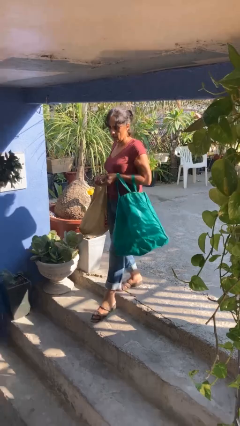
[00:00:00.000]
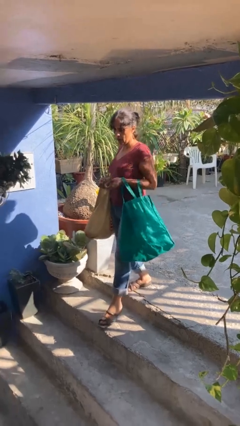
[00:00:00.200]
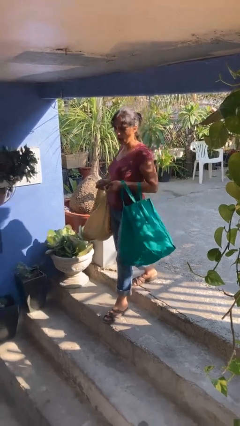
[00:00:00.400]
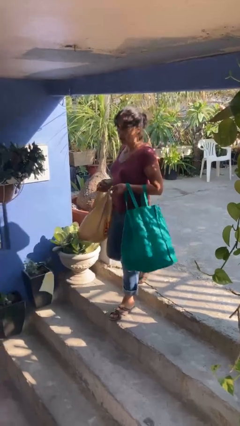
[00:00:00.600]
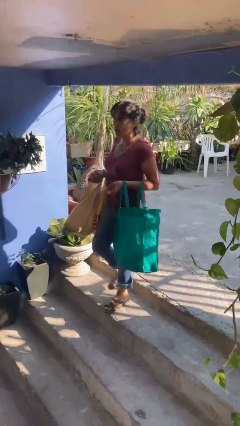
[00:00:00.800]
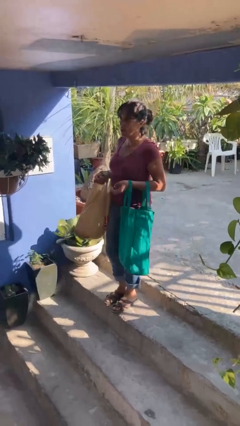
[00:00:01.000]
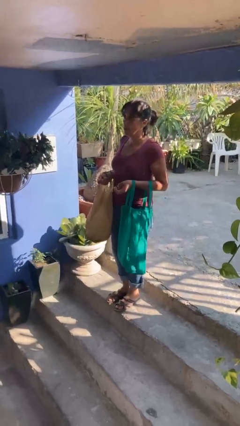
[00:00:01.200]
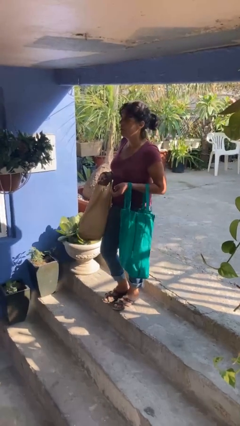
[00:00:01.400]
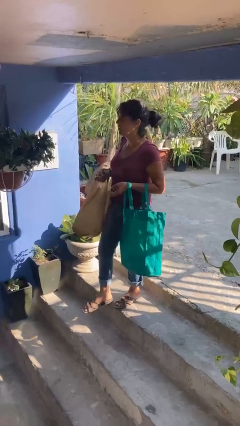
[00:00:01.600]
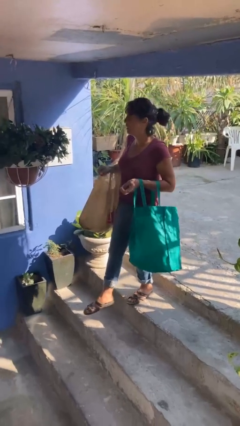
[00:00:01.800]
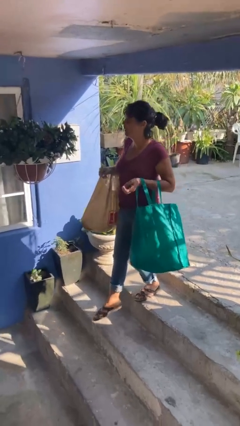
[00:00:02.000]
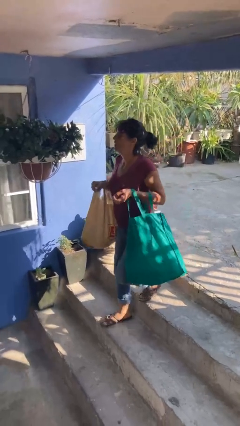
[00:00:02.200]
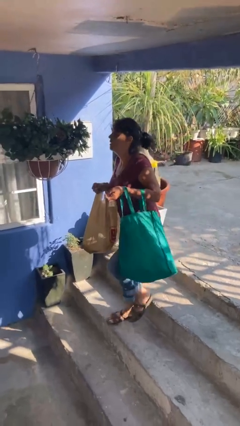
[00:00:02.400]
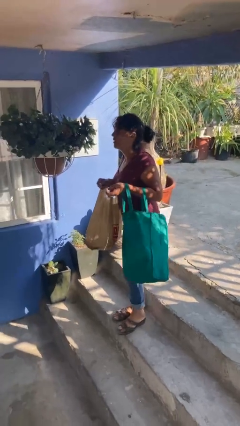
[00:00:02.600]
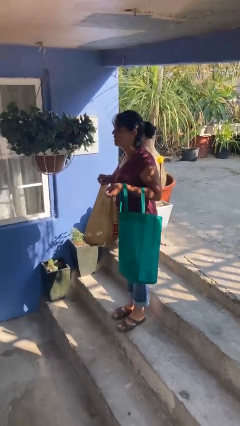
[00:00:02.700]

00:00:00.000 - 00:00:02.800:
person carries groceries

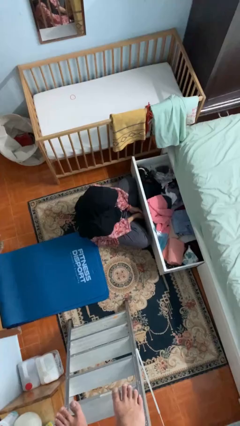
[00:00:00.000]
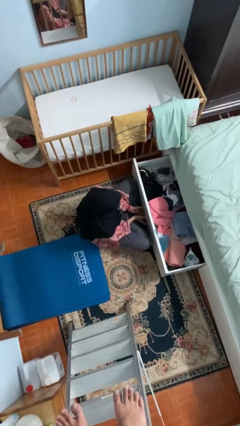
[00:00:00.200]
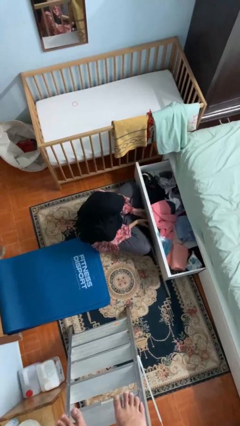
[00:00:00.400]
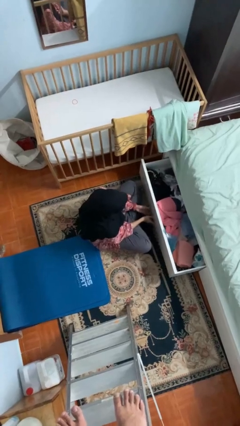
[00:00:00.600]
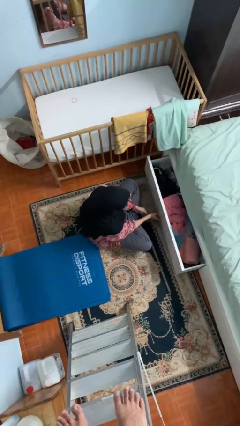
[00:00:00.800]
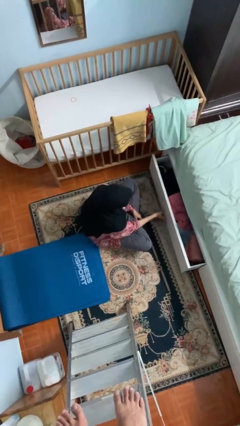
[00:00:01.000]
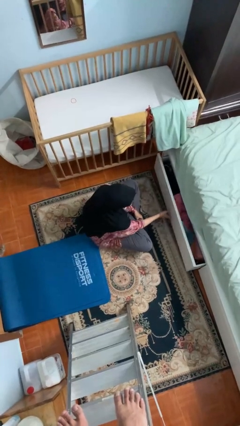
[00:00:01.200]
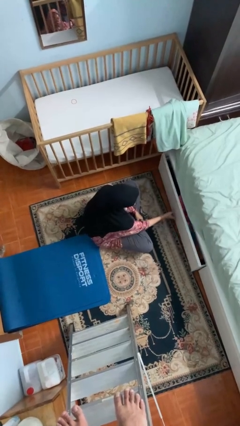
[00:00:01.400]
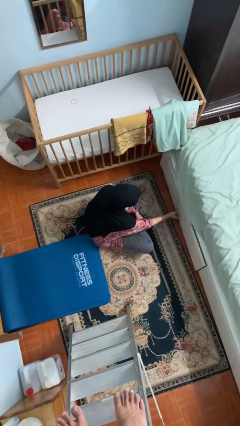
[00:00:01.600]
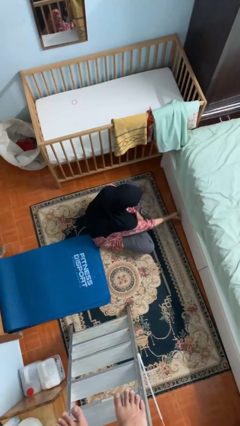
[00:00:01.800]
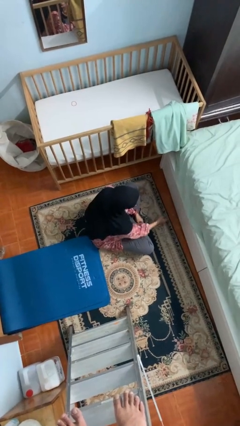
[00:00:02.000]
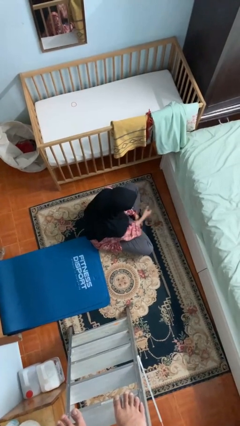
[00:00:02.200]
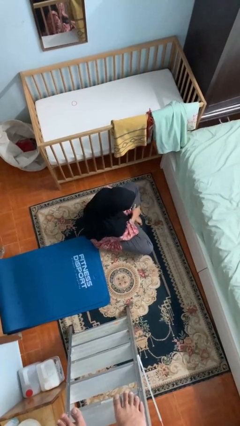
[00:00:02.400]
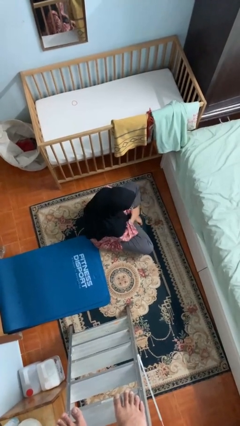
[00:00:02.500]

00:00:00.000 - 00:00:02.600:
person closes dresser drawer

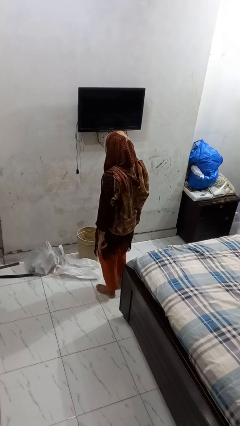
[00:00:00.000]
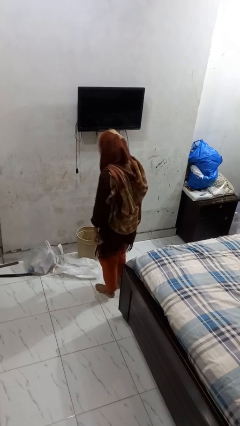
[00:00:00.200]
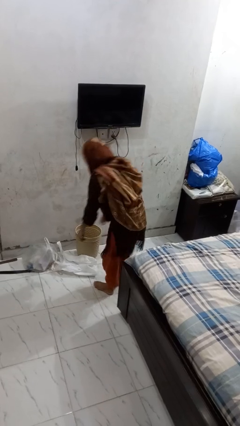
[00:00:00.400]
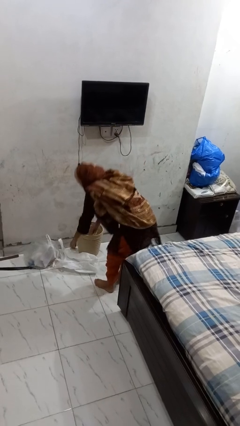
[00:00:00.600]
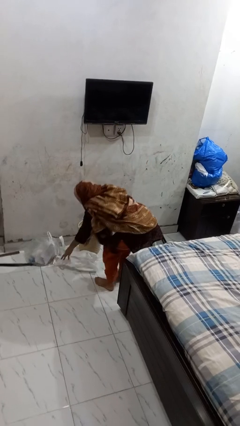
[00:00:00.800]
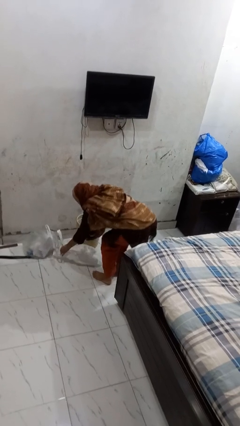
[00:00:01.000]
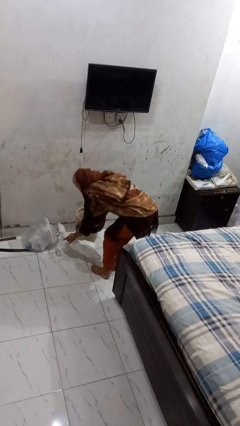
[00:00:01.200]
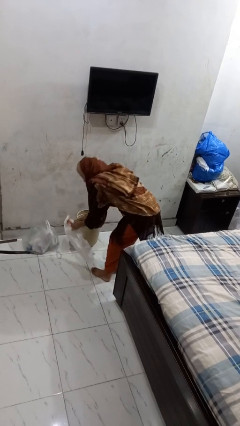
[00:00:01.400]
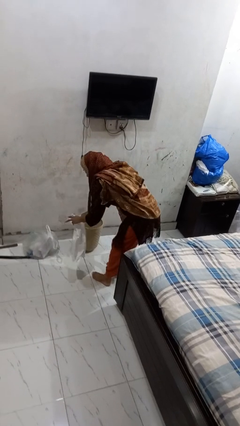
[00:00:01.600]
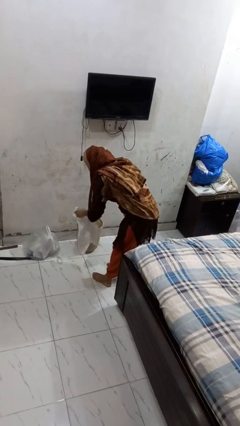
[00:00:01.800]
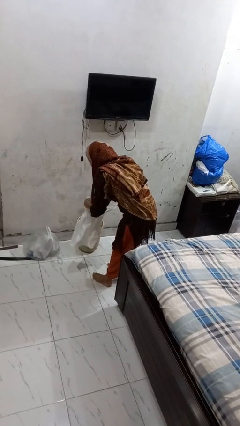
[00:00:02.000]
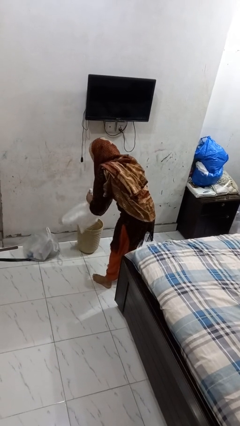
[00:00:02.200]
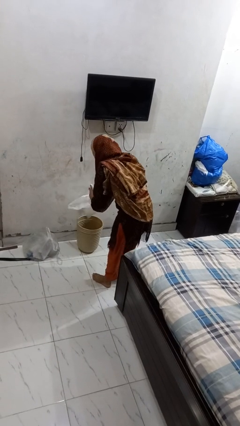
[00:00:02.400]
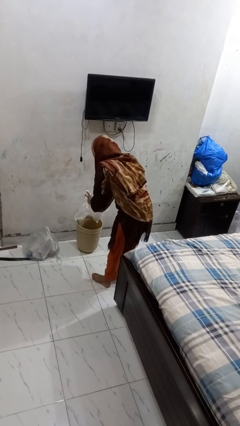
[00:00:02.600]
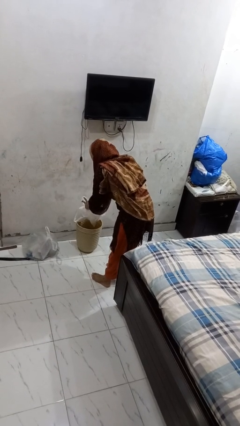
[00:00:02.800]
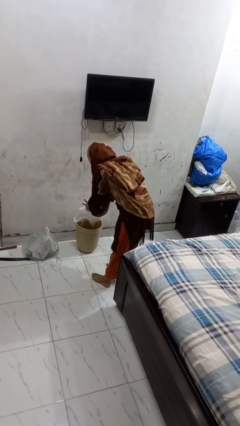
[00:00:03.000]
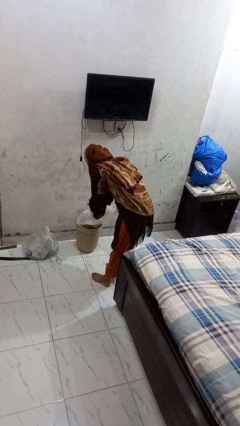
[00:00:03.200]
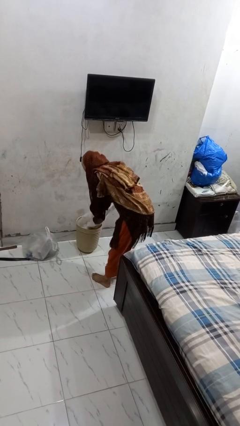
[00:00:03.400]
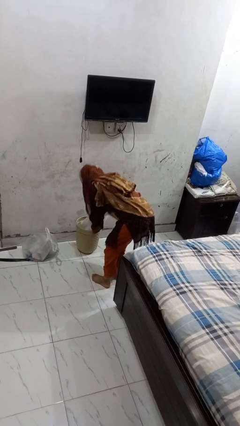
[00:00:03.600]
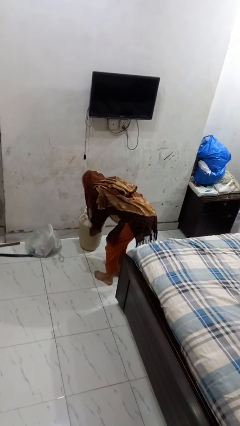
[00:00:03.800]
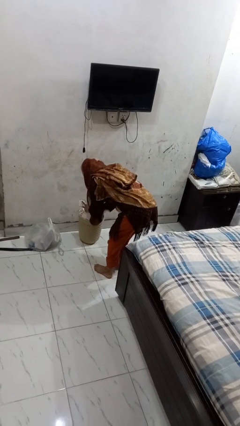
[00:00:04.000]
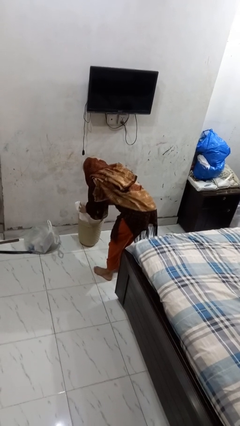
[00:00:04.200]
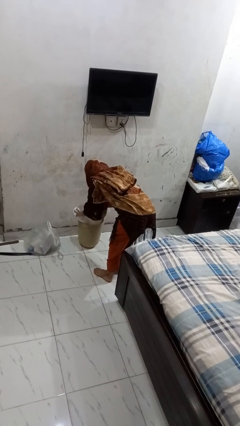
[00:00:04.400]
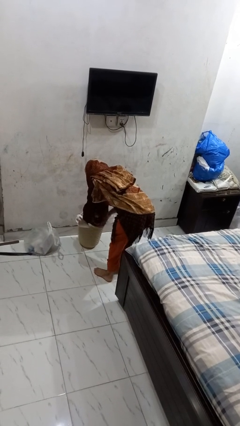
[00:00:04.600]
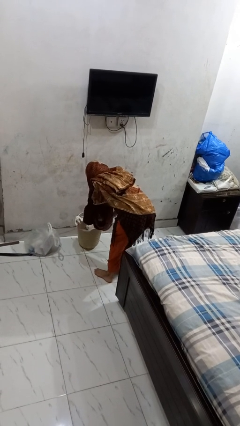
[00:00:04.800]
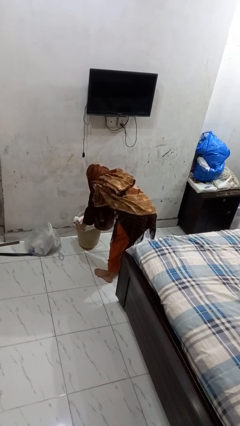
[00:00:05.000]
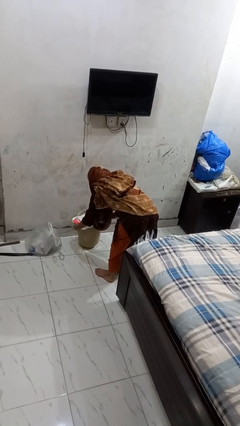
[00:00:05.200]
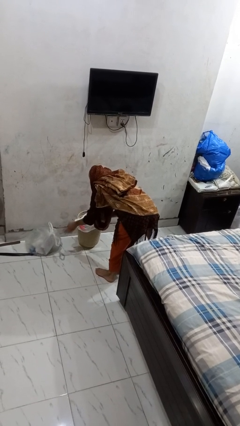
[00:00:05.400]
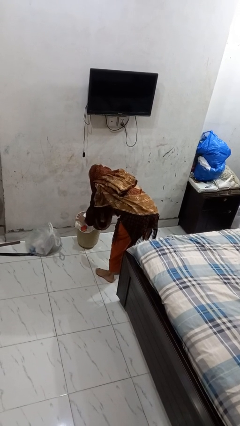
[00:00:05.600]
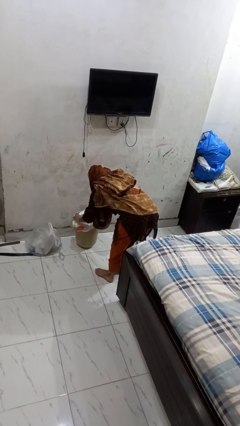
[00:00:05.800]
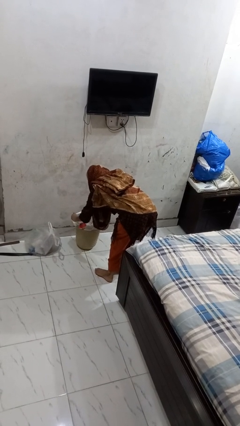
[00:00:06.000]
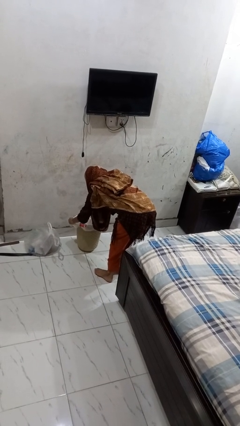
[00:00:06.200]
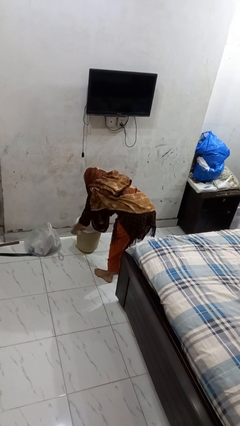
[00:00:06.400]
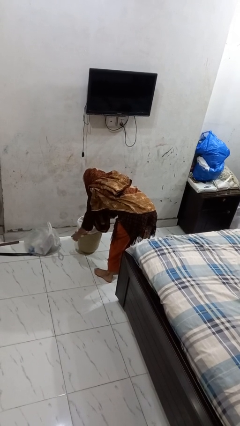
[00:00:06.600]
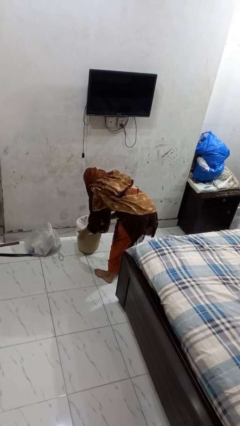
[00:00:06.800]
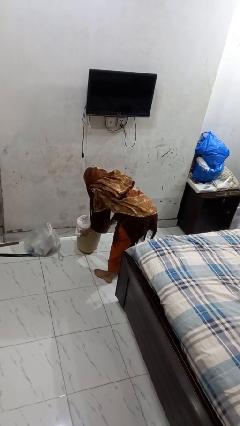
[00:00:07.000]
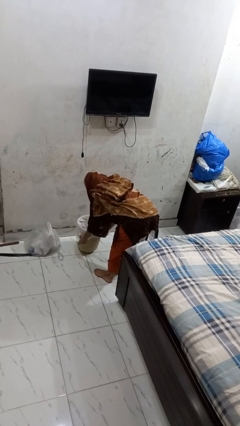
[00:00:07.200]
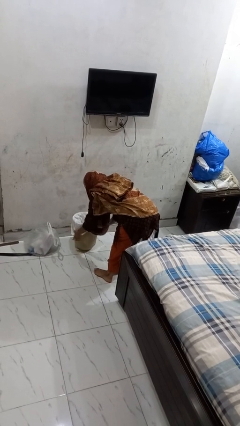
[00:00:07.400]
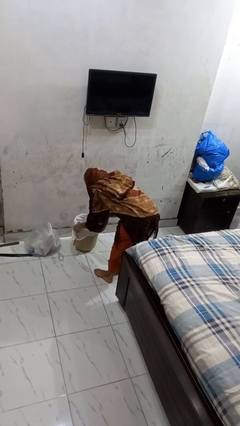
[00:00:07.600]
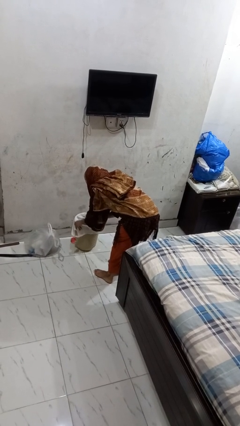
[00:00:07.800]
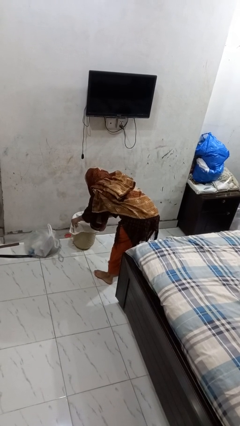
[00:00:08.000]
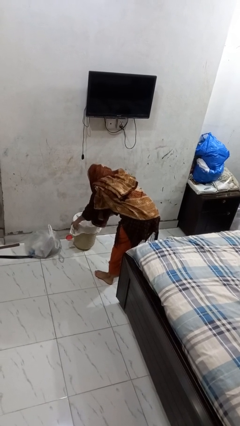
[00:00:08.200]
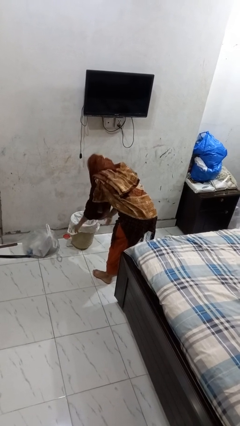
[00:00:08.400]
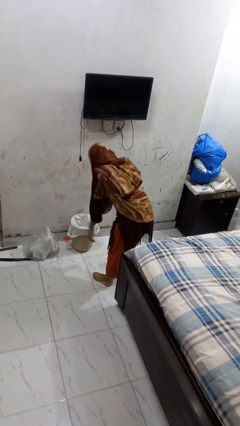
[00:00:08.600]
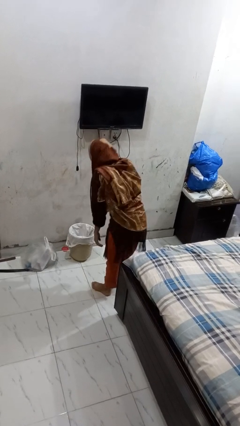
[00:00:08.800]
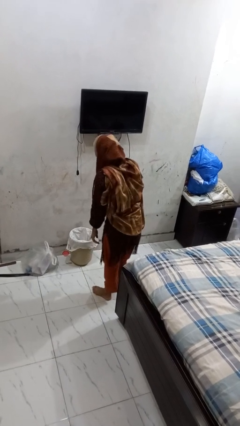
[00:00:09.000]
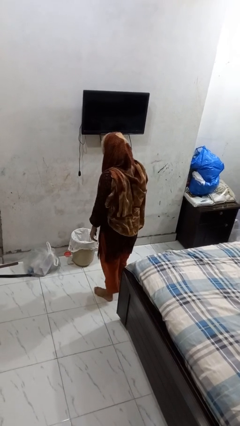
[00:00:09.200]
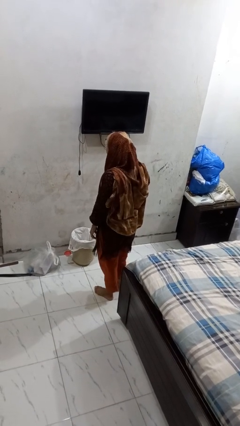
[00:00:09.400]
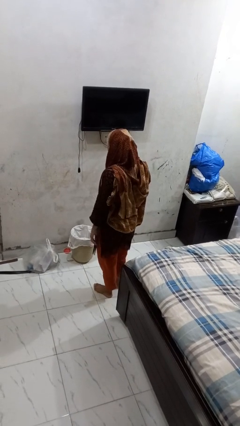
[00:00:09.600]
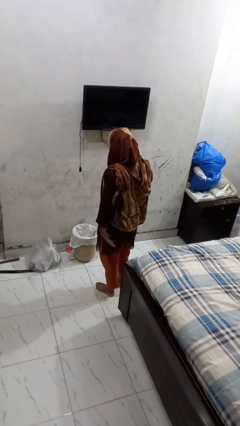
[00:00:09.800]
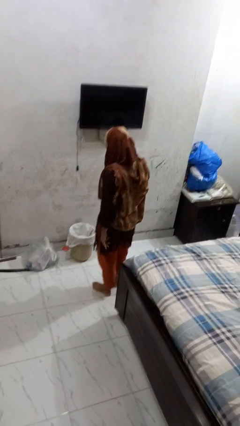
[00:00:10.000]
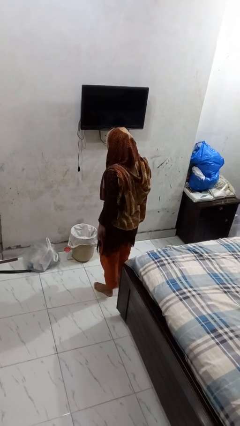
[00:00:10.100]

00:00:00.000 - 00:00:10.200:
person inserts trashbag into trashcan

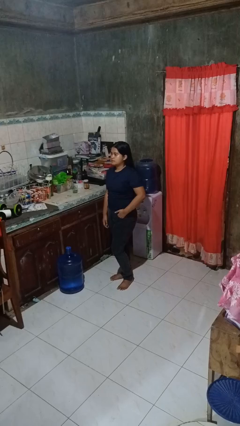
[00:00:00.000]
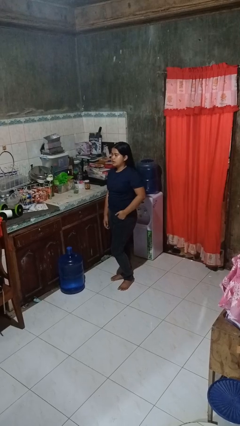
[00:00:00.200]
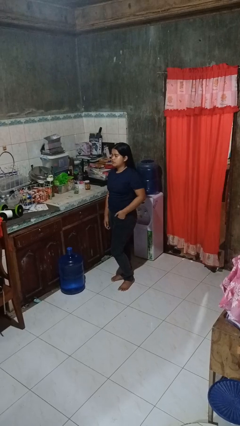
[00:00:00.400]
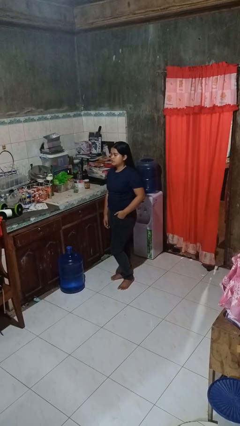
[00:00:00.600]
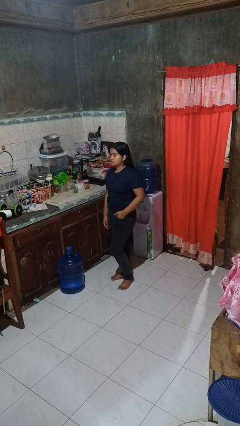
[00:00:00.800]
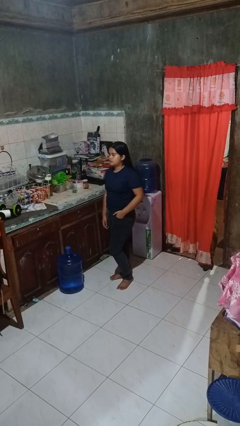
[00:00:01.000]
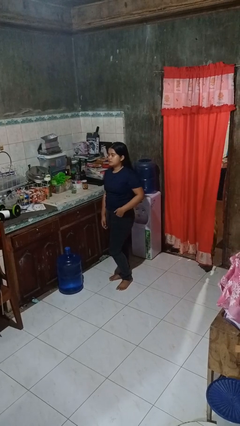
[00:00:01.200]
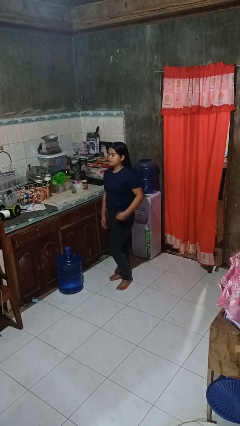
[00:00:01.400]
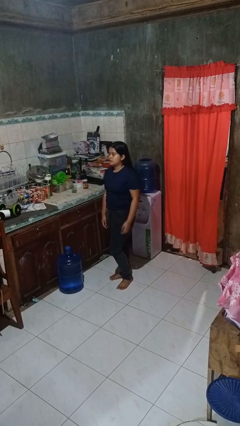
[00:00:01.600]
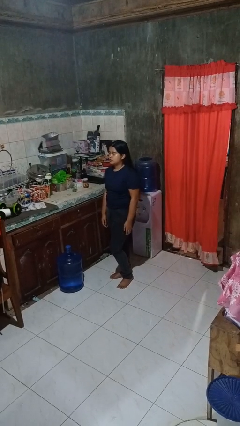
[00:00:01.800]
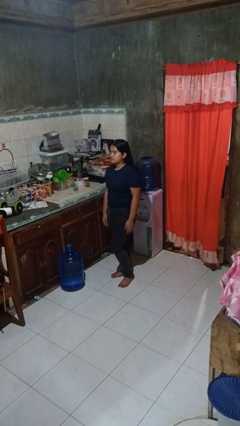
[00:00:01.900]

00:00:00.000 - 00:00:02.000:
person puts hands in back pockets
